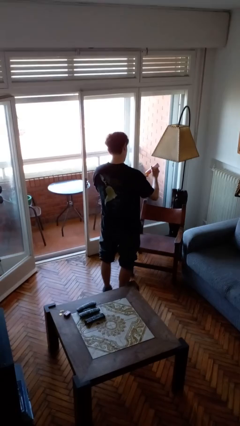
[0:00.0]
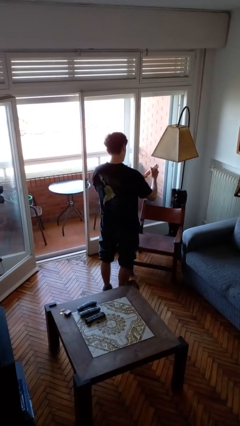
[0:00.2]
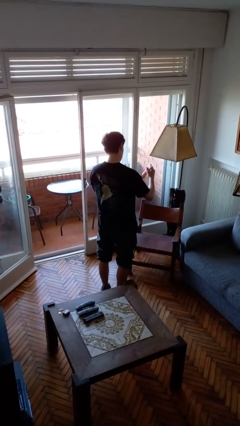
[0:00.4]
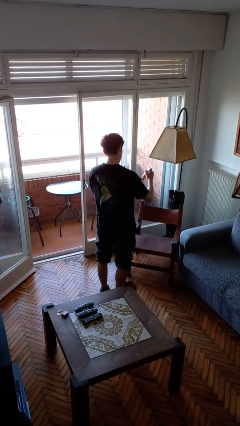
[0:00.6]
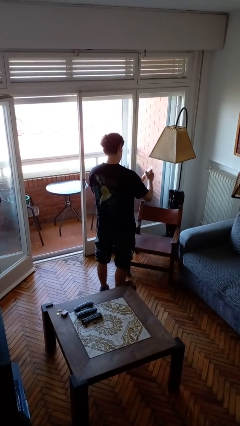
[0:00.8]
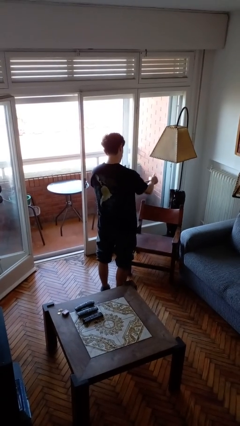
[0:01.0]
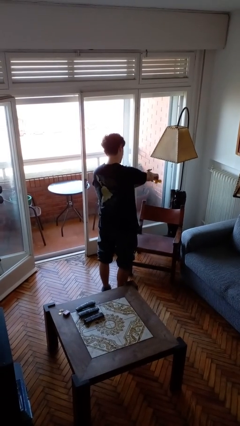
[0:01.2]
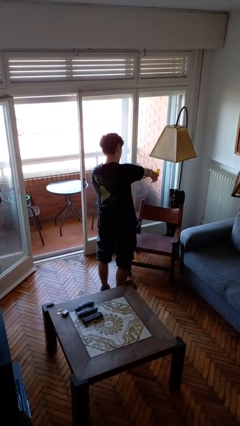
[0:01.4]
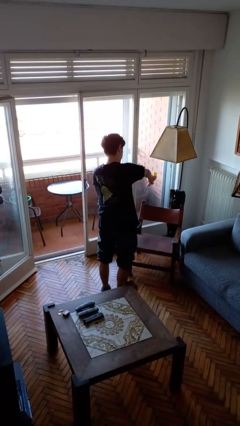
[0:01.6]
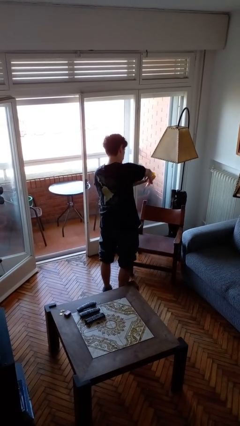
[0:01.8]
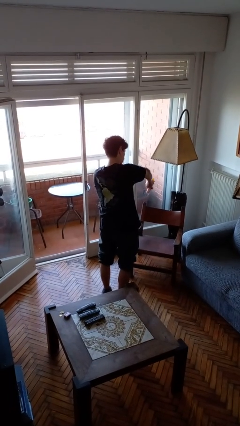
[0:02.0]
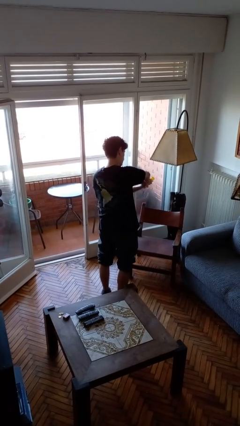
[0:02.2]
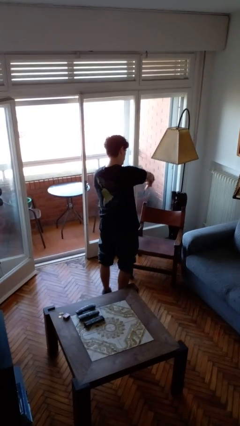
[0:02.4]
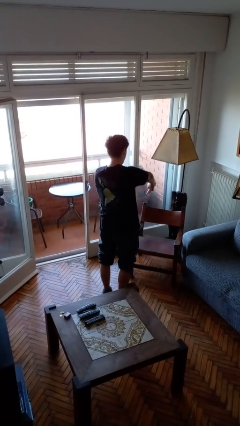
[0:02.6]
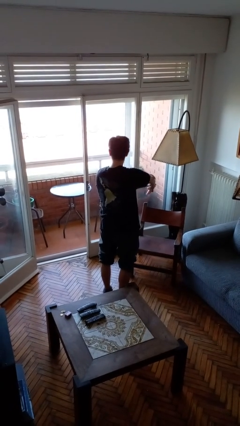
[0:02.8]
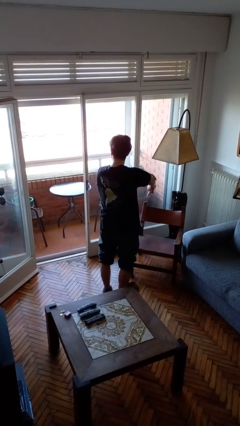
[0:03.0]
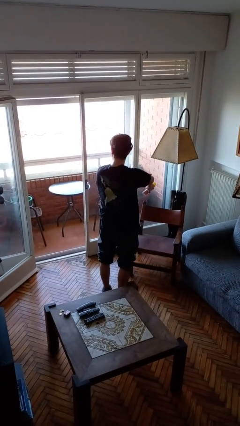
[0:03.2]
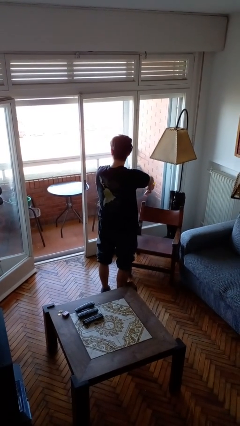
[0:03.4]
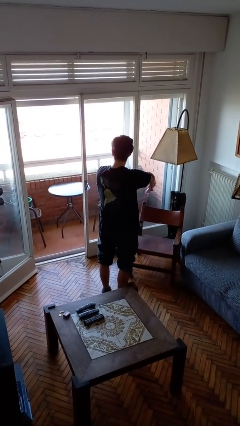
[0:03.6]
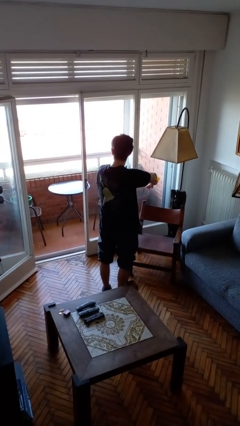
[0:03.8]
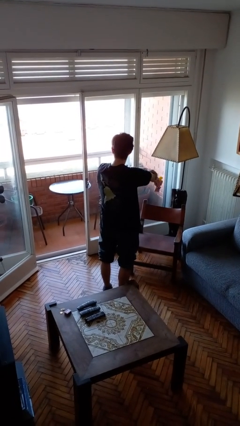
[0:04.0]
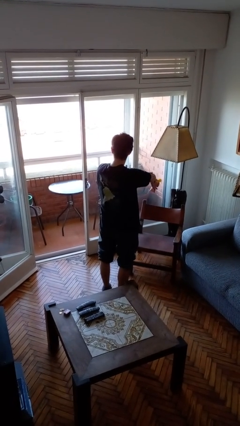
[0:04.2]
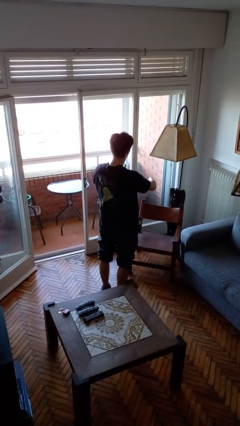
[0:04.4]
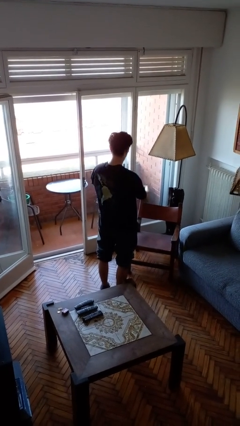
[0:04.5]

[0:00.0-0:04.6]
person applies sunscreen

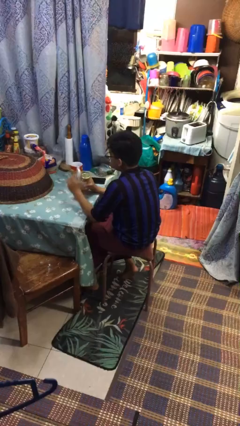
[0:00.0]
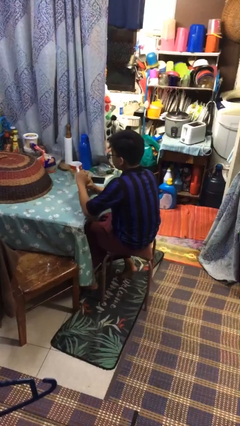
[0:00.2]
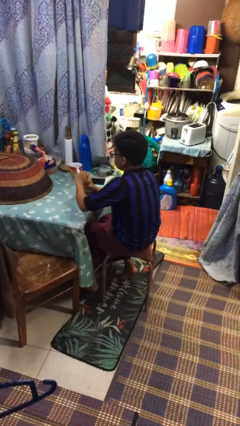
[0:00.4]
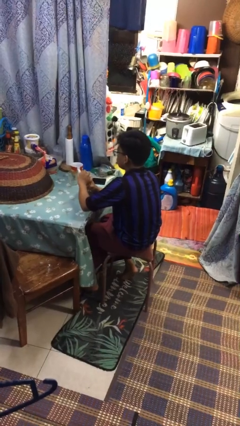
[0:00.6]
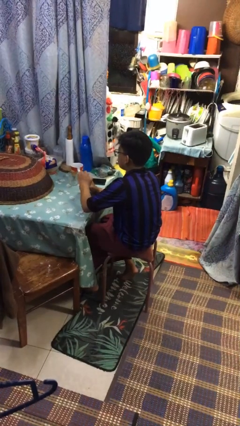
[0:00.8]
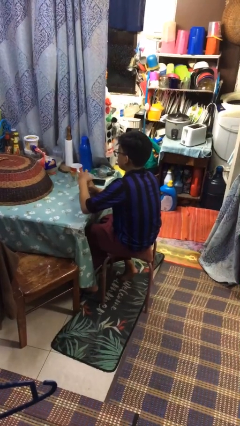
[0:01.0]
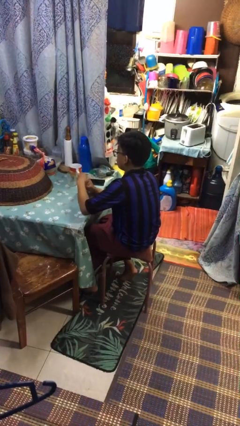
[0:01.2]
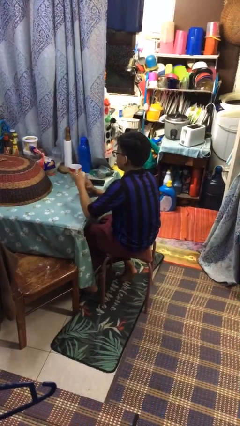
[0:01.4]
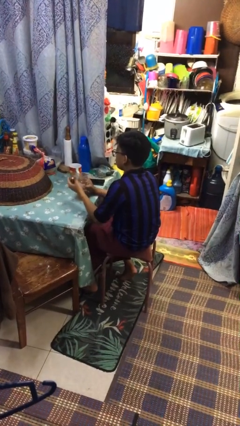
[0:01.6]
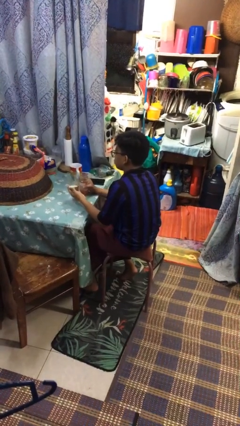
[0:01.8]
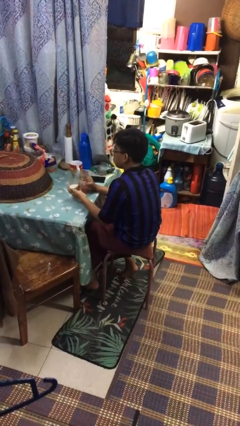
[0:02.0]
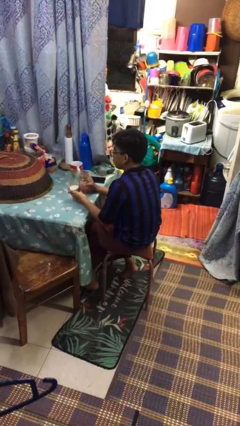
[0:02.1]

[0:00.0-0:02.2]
person opens jar

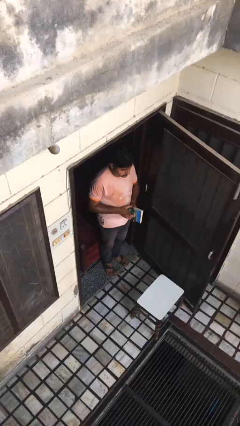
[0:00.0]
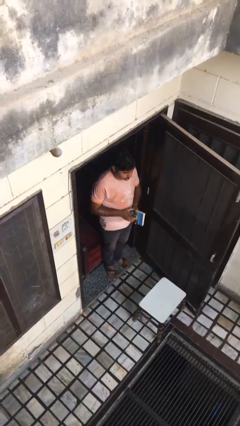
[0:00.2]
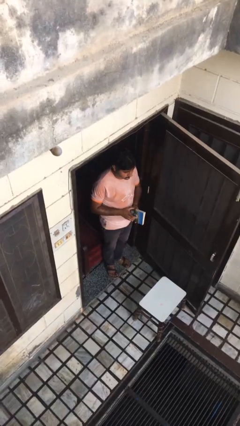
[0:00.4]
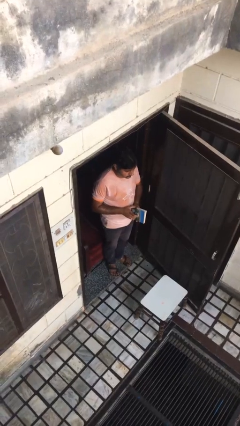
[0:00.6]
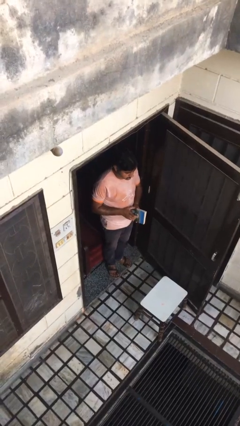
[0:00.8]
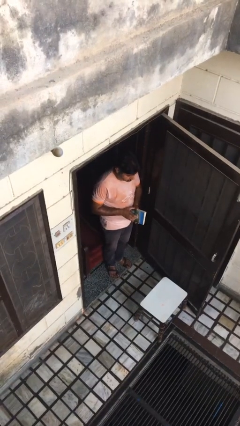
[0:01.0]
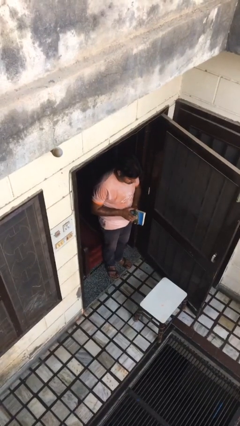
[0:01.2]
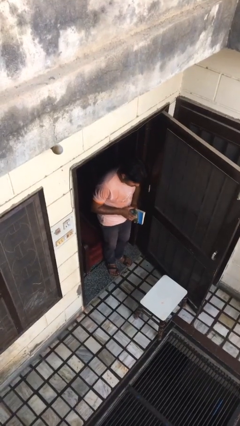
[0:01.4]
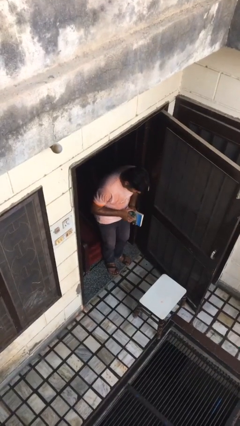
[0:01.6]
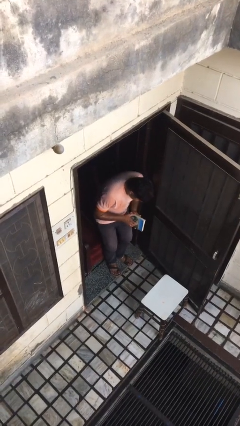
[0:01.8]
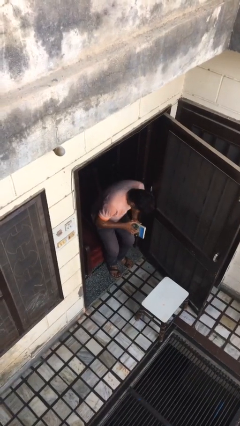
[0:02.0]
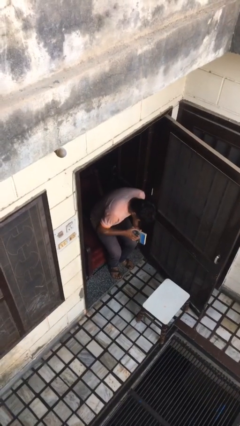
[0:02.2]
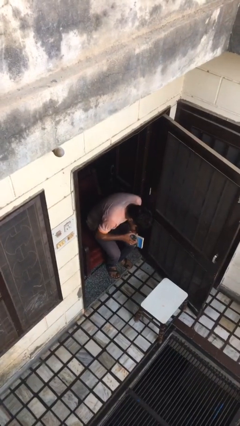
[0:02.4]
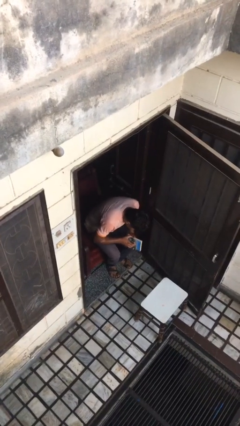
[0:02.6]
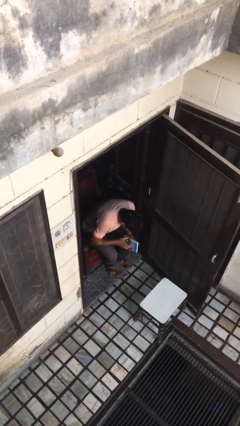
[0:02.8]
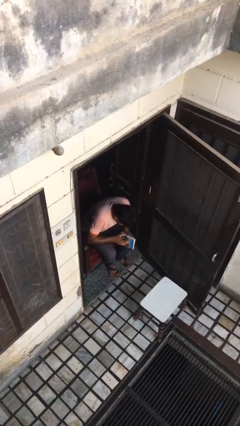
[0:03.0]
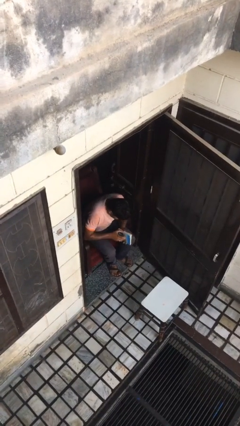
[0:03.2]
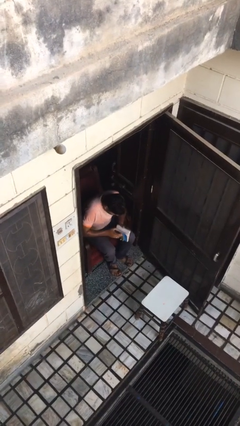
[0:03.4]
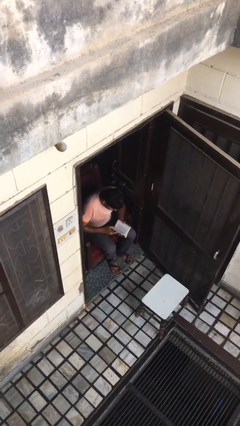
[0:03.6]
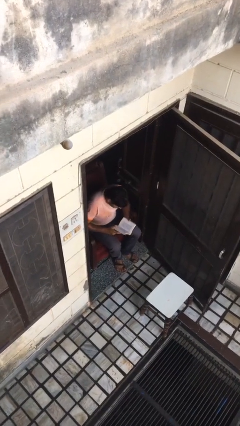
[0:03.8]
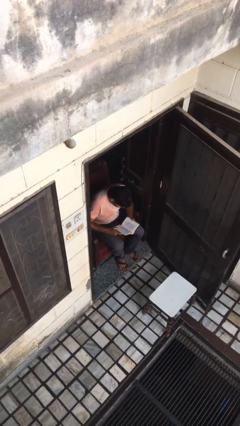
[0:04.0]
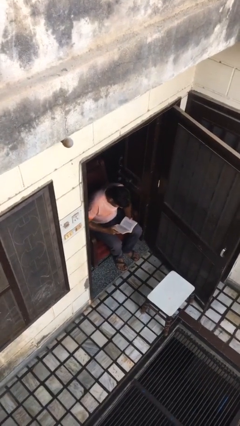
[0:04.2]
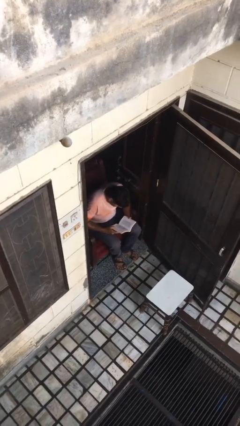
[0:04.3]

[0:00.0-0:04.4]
person sits down

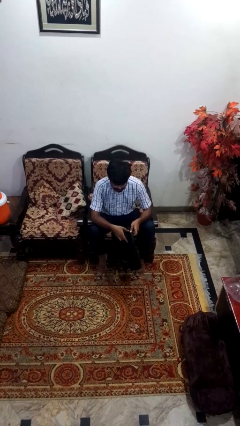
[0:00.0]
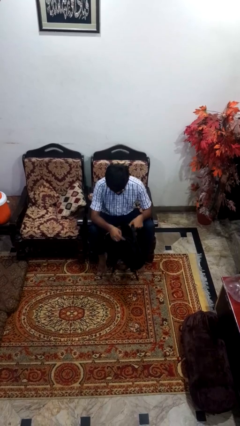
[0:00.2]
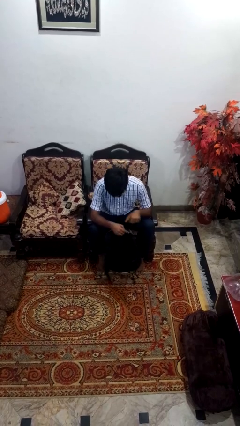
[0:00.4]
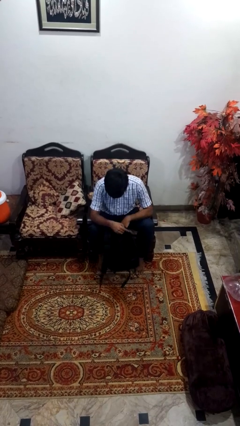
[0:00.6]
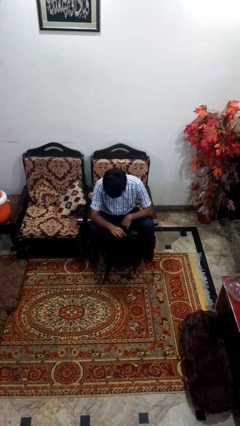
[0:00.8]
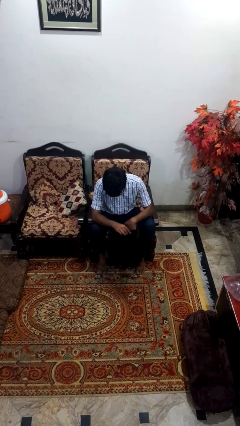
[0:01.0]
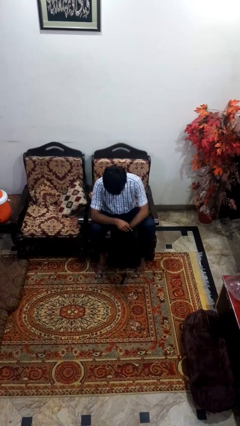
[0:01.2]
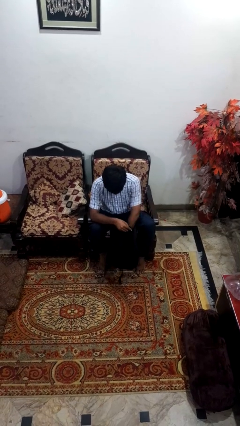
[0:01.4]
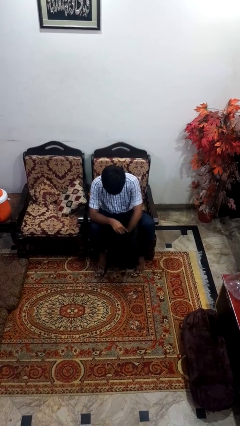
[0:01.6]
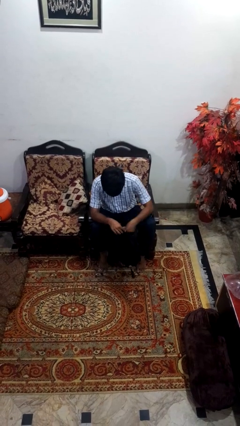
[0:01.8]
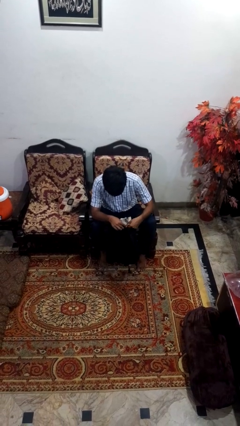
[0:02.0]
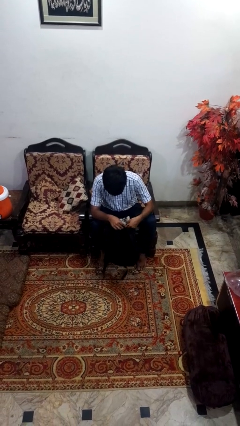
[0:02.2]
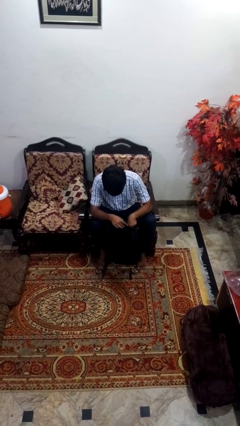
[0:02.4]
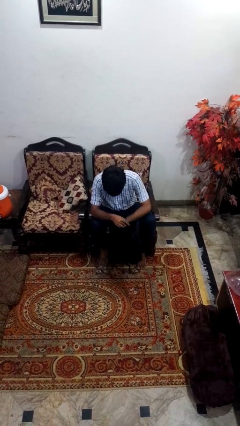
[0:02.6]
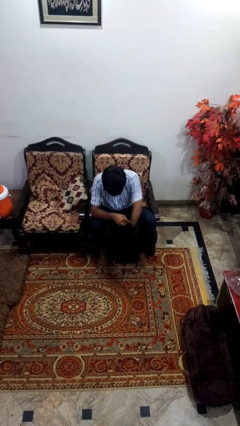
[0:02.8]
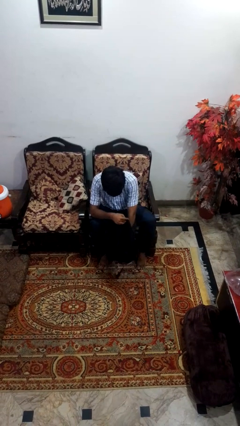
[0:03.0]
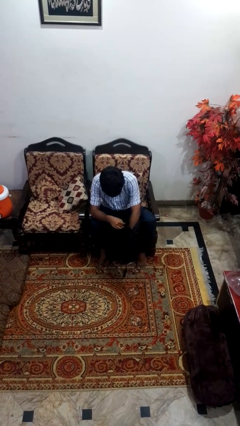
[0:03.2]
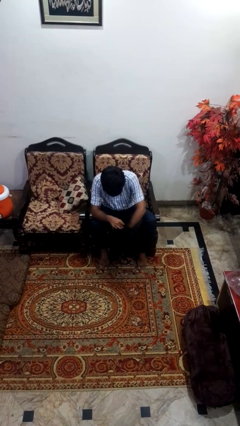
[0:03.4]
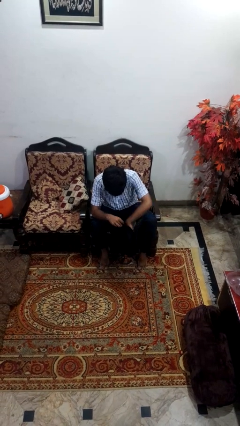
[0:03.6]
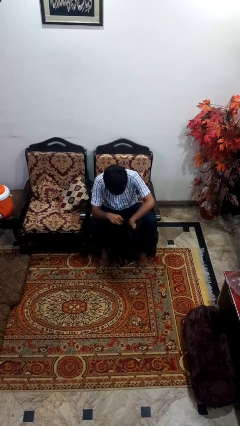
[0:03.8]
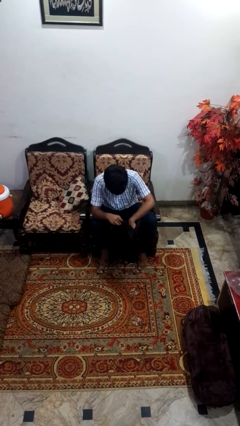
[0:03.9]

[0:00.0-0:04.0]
person searches in bag

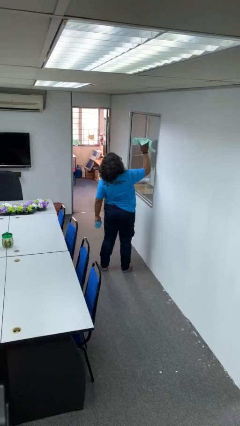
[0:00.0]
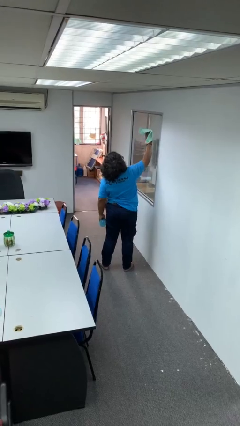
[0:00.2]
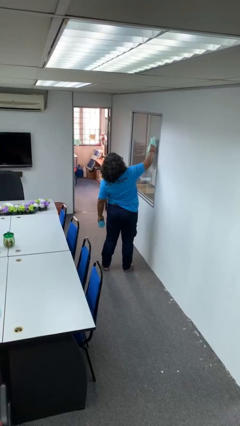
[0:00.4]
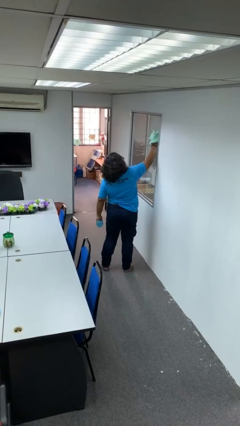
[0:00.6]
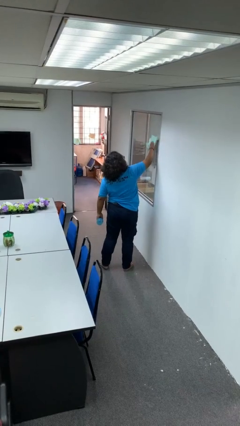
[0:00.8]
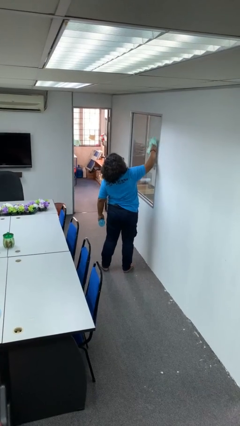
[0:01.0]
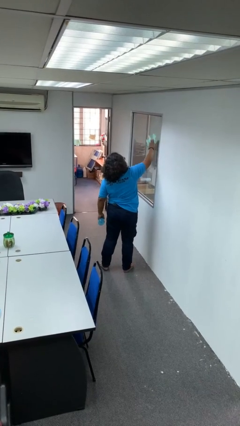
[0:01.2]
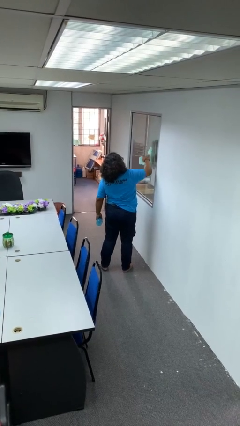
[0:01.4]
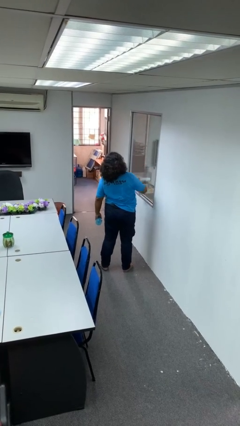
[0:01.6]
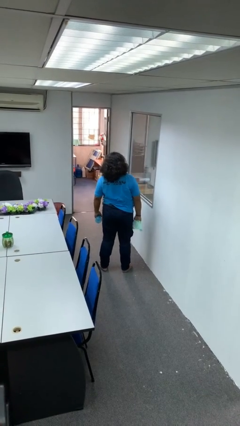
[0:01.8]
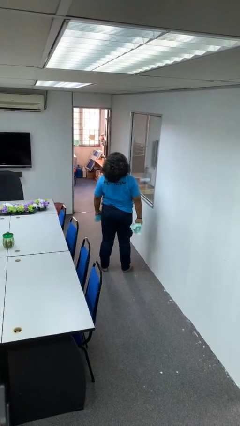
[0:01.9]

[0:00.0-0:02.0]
person washes window

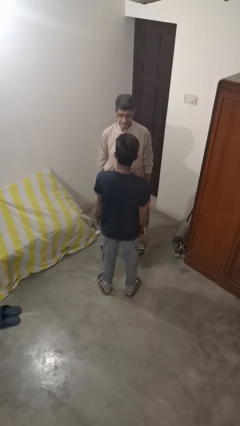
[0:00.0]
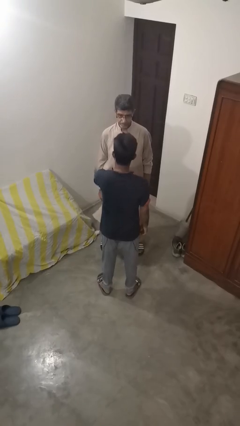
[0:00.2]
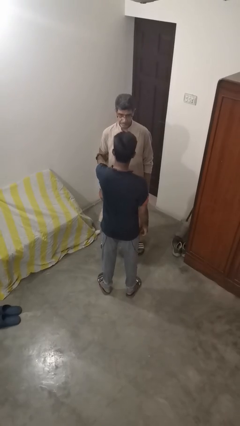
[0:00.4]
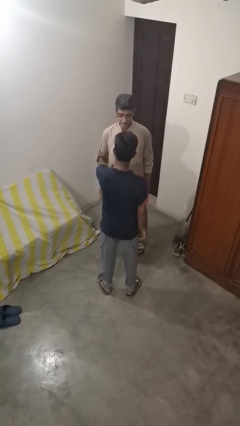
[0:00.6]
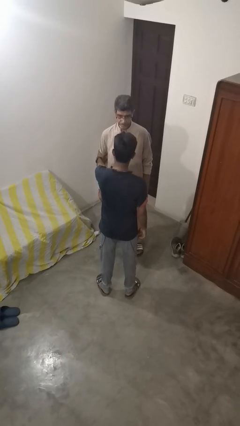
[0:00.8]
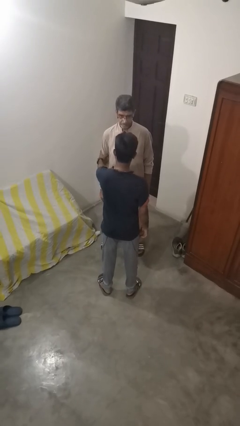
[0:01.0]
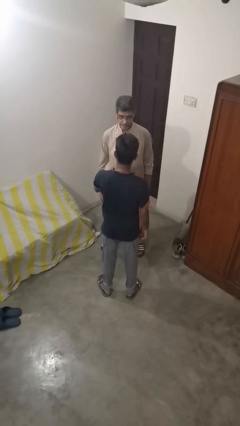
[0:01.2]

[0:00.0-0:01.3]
person grabs person by bicep
